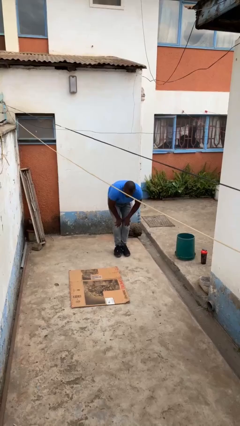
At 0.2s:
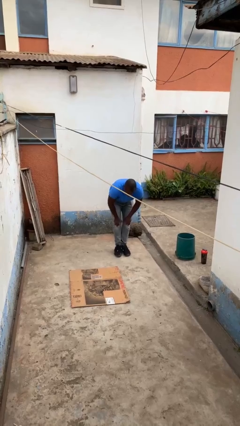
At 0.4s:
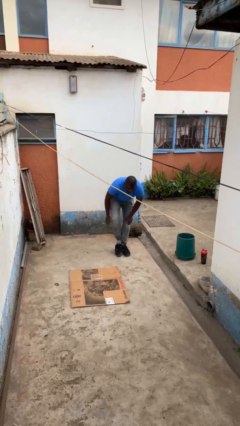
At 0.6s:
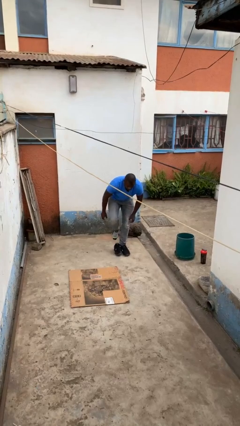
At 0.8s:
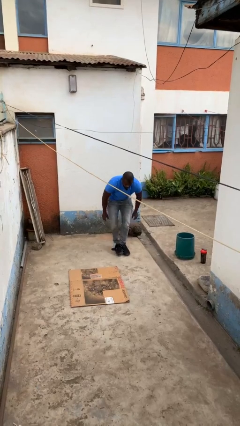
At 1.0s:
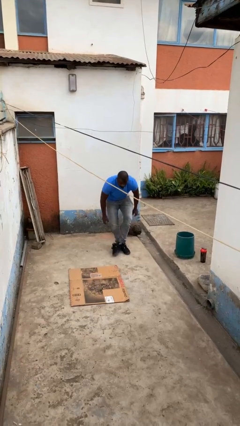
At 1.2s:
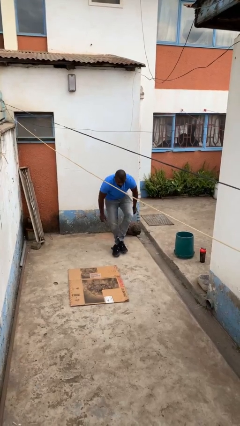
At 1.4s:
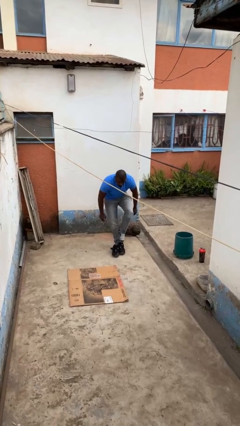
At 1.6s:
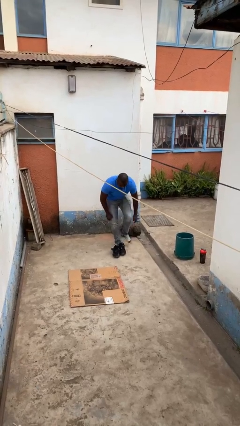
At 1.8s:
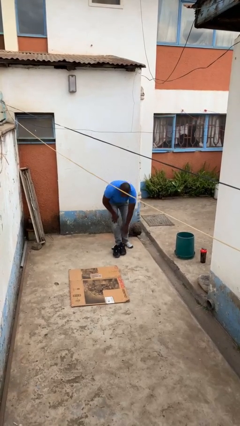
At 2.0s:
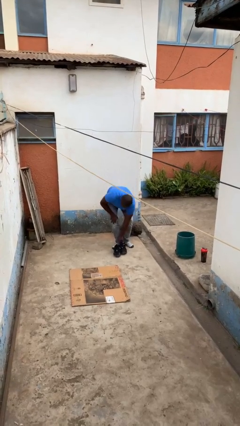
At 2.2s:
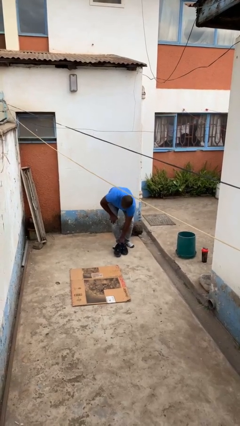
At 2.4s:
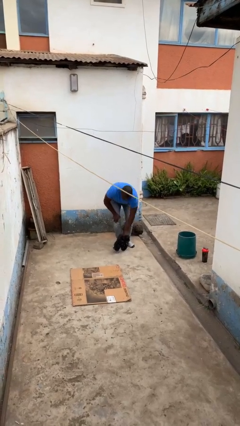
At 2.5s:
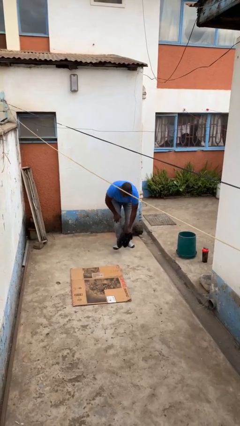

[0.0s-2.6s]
person takes off shoes

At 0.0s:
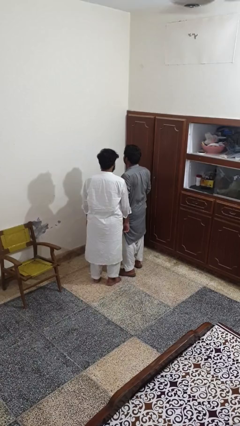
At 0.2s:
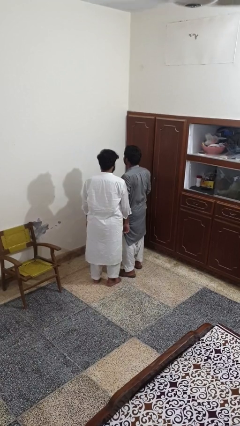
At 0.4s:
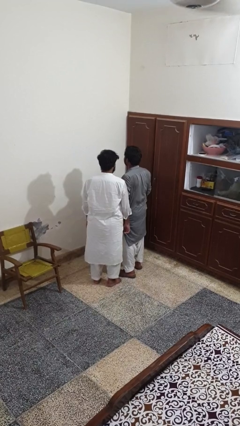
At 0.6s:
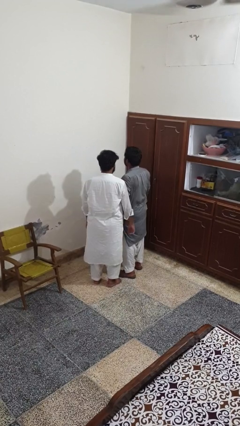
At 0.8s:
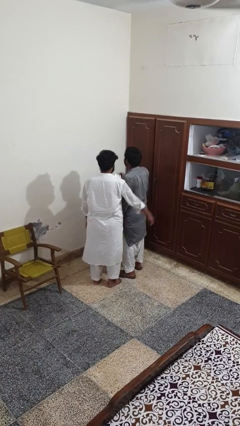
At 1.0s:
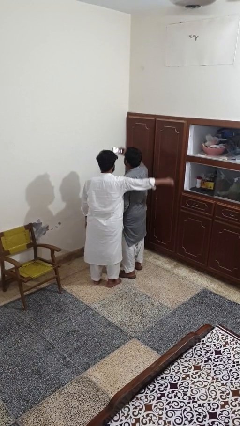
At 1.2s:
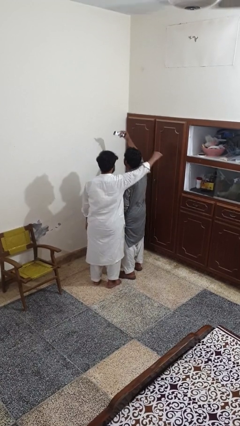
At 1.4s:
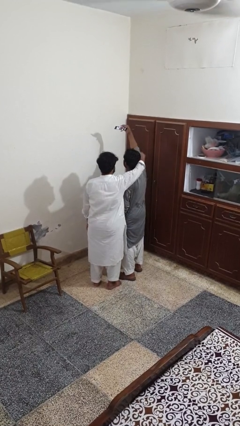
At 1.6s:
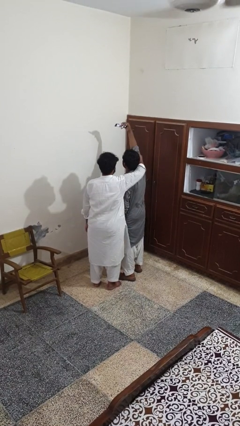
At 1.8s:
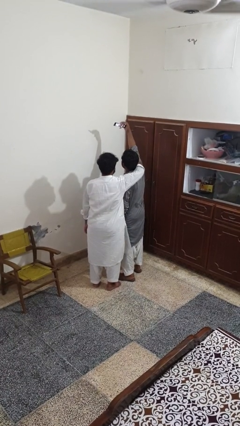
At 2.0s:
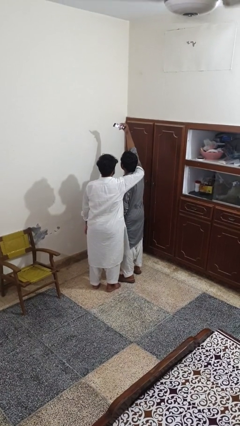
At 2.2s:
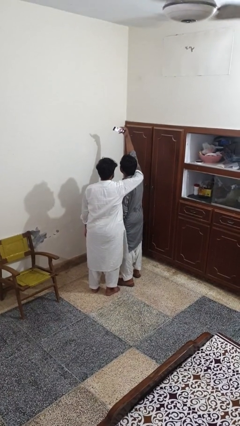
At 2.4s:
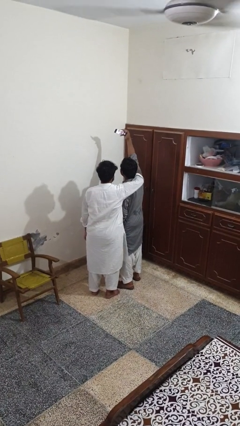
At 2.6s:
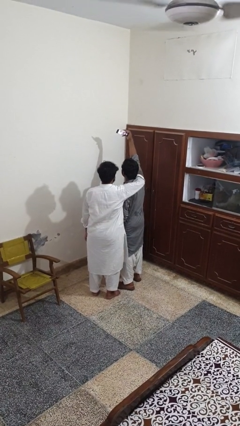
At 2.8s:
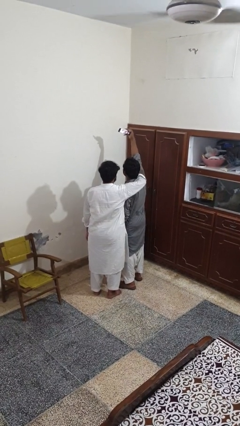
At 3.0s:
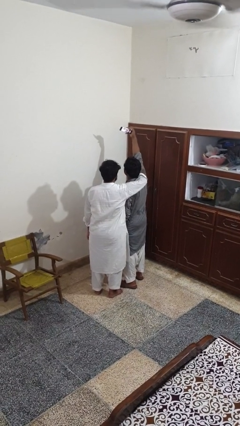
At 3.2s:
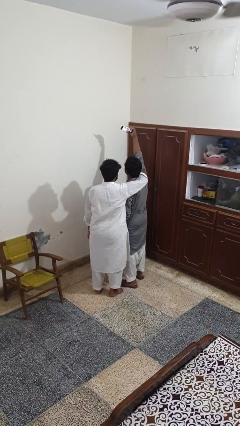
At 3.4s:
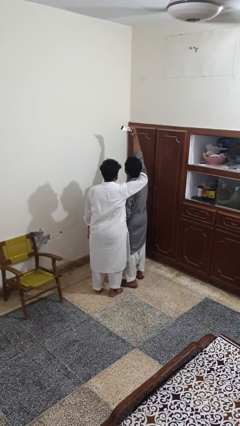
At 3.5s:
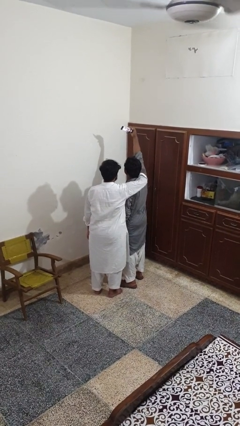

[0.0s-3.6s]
person takes selfie with person

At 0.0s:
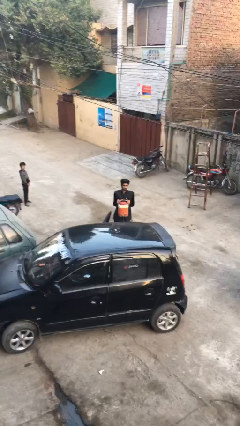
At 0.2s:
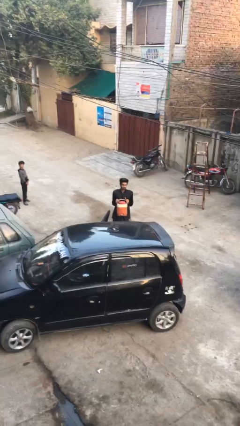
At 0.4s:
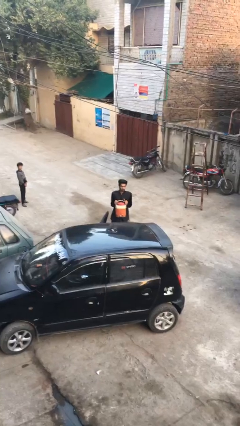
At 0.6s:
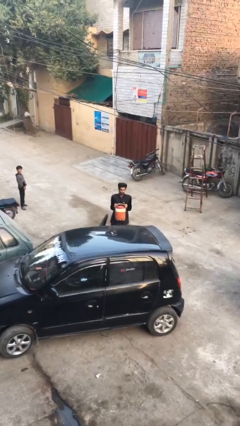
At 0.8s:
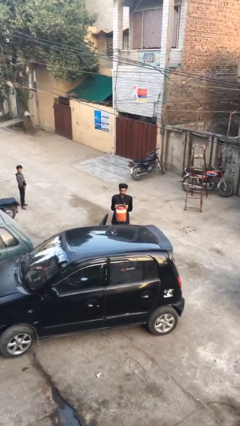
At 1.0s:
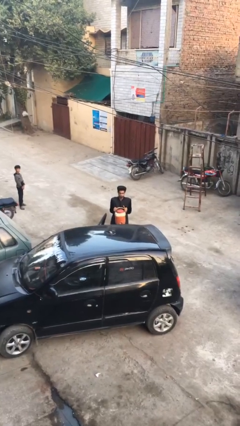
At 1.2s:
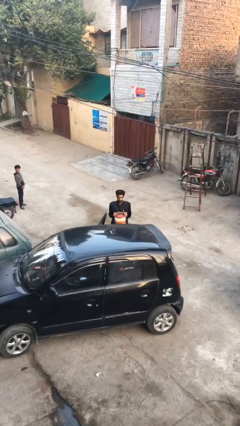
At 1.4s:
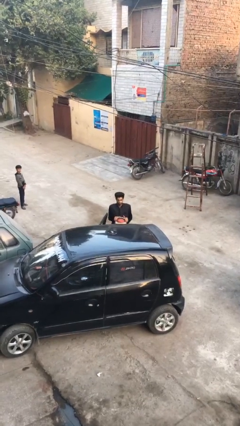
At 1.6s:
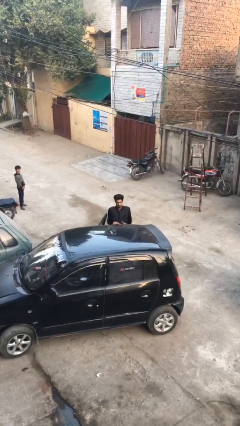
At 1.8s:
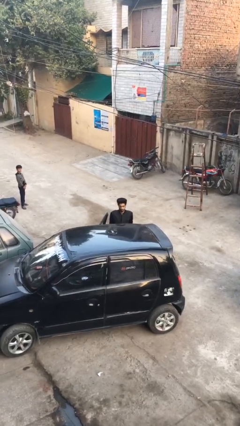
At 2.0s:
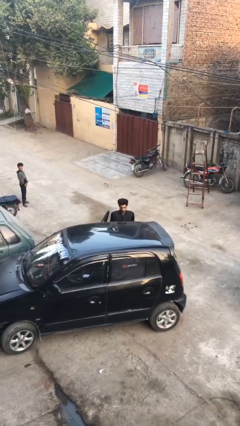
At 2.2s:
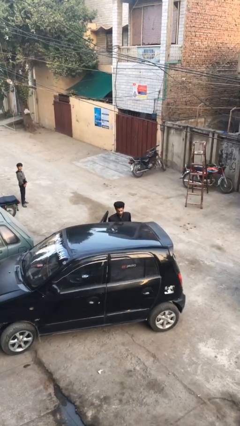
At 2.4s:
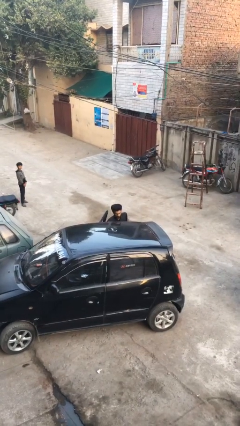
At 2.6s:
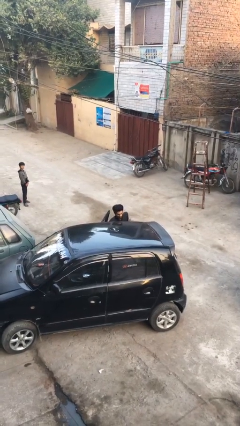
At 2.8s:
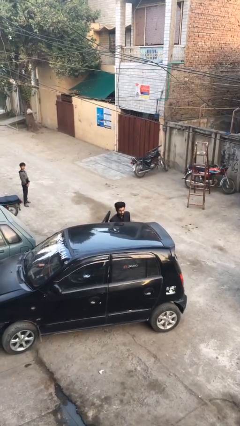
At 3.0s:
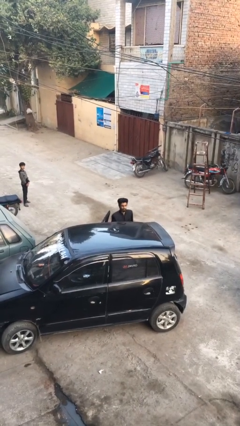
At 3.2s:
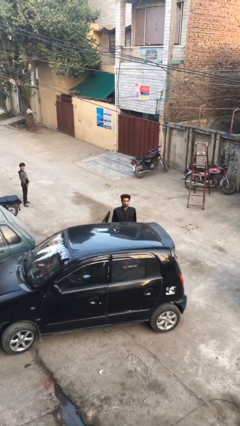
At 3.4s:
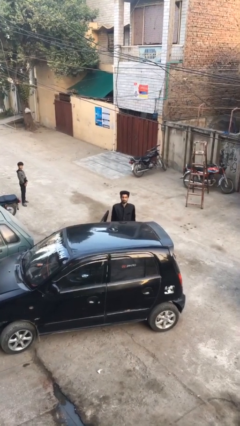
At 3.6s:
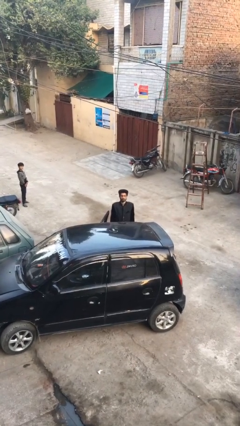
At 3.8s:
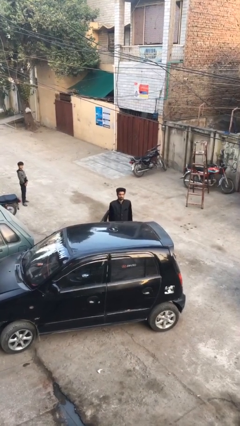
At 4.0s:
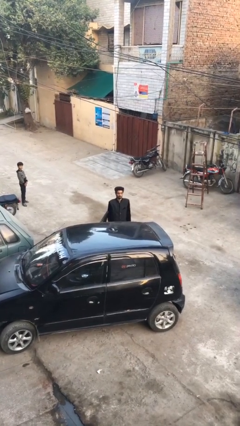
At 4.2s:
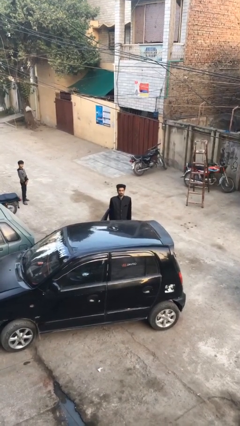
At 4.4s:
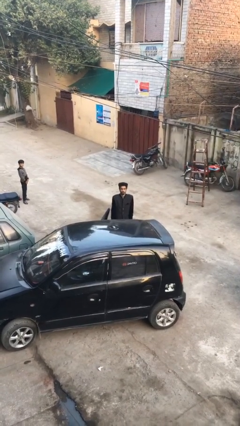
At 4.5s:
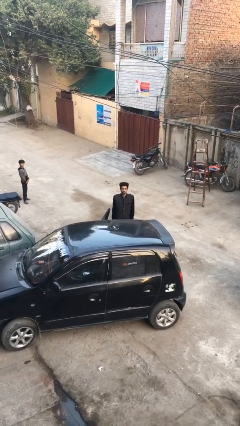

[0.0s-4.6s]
person loads car

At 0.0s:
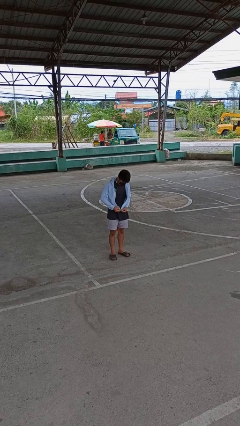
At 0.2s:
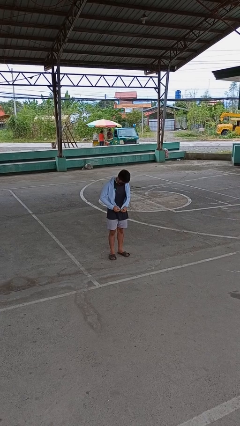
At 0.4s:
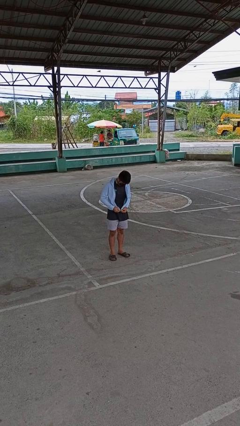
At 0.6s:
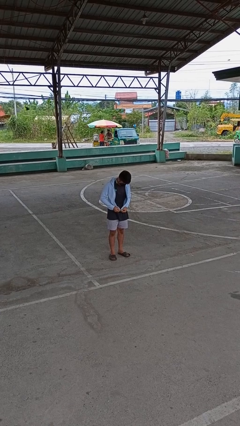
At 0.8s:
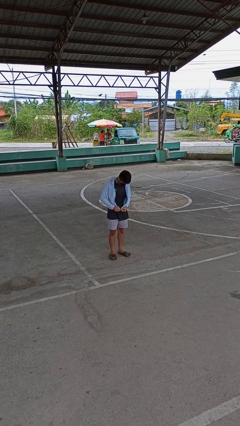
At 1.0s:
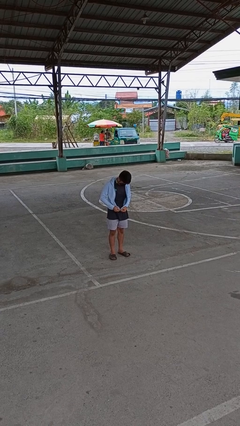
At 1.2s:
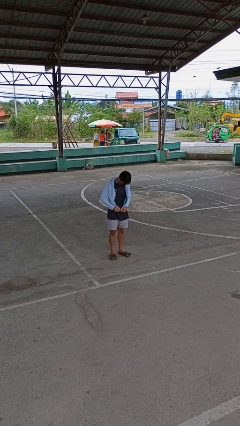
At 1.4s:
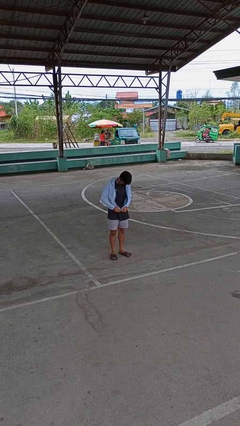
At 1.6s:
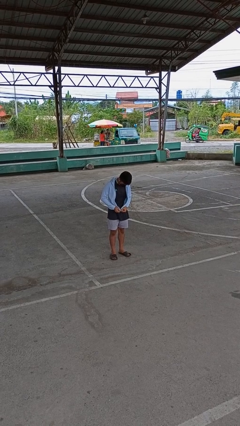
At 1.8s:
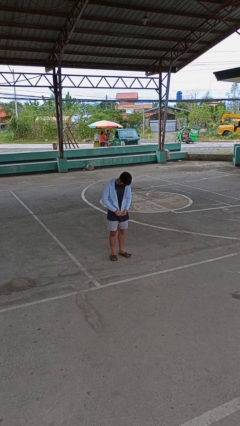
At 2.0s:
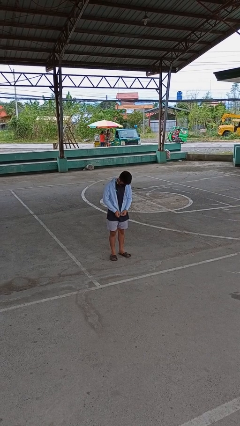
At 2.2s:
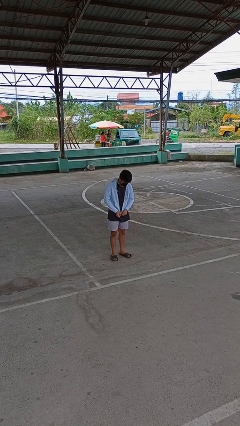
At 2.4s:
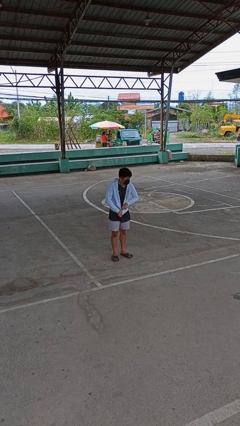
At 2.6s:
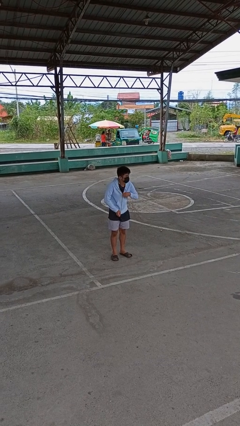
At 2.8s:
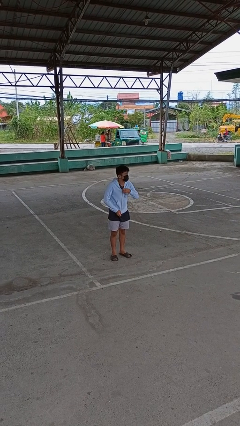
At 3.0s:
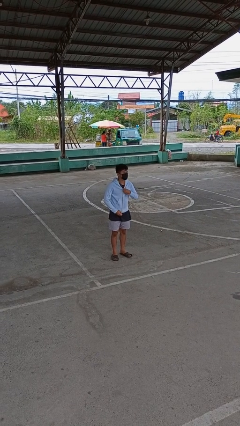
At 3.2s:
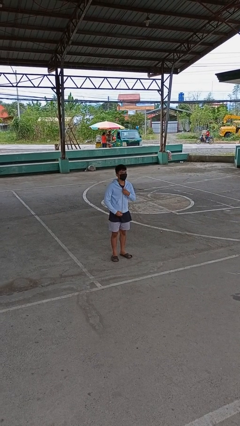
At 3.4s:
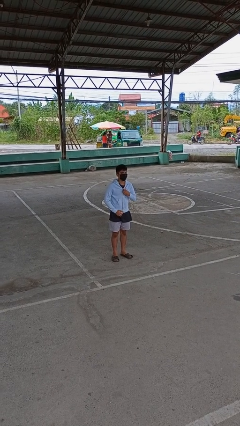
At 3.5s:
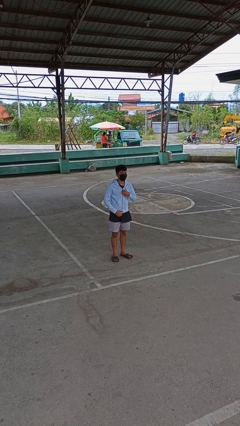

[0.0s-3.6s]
person zips up jacket

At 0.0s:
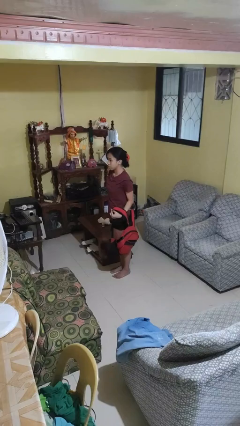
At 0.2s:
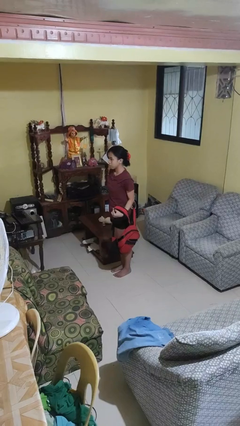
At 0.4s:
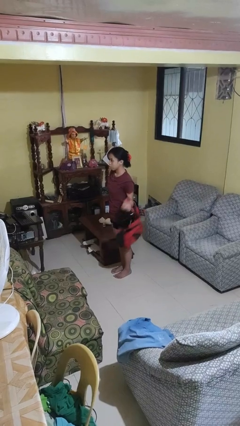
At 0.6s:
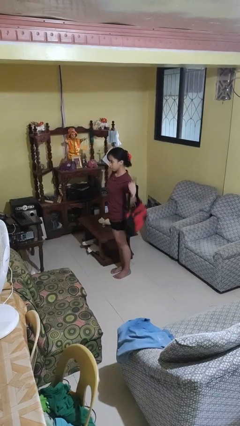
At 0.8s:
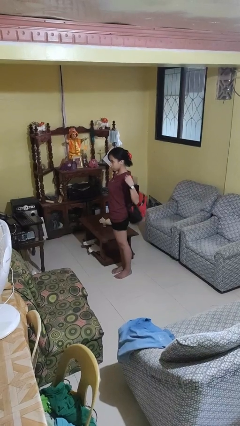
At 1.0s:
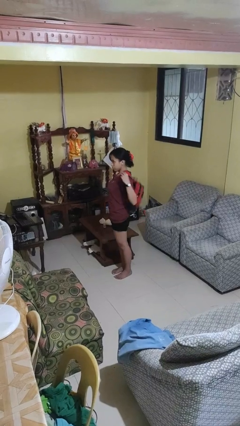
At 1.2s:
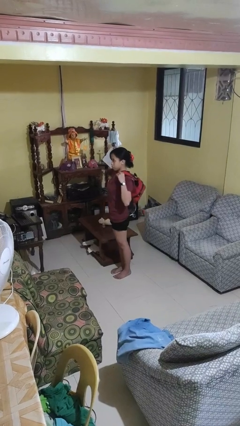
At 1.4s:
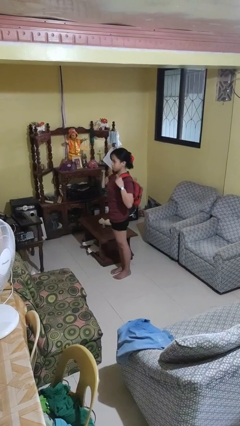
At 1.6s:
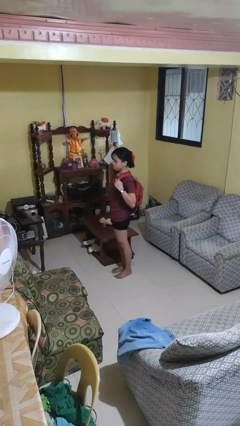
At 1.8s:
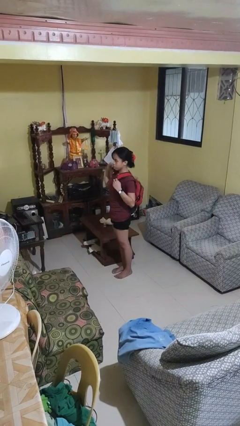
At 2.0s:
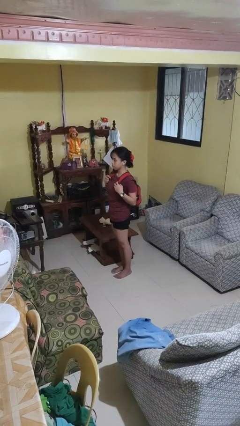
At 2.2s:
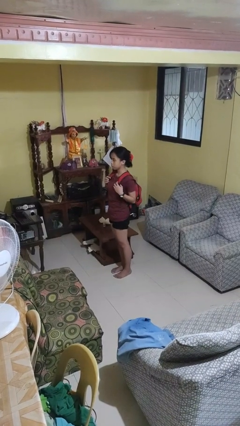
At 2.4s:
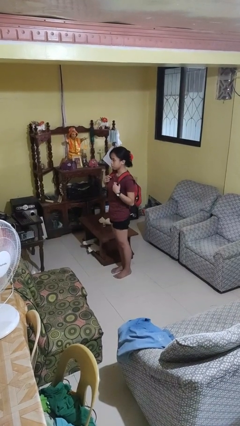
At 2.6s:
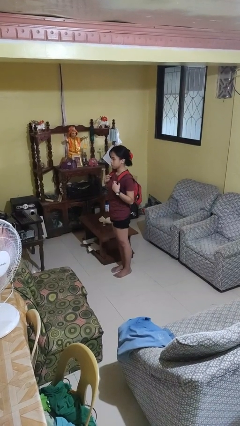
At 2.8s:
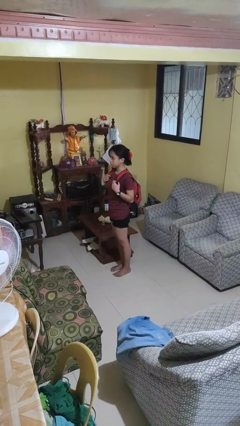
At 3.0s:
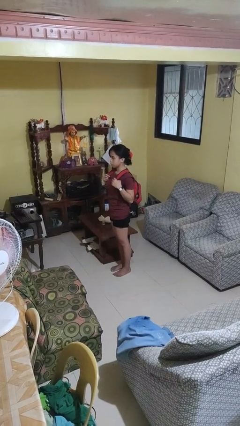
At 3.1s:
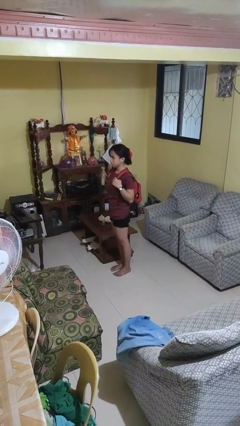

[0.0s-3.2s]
person puts on backpack
